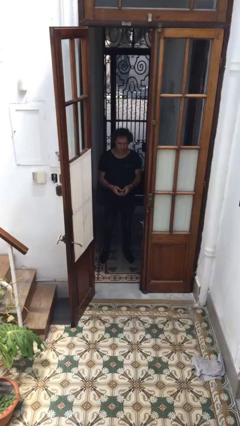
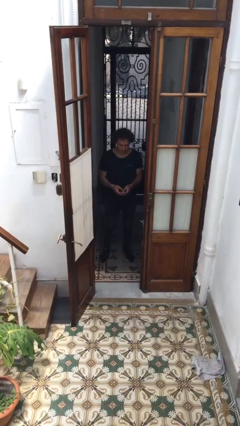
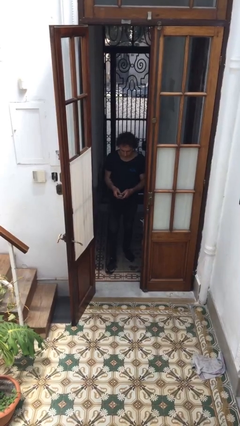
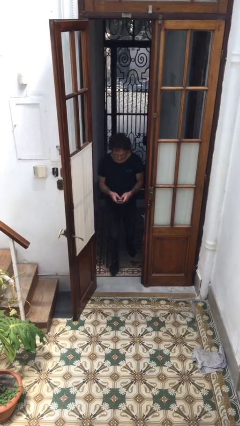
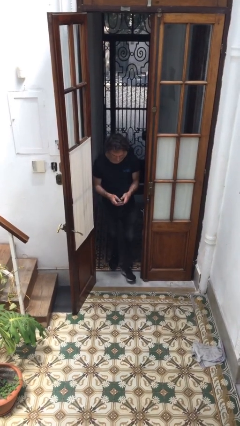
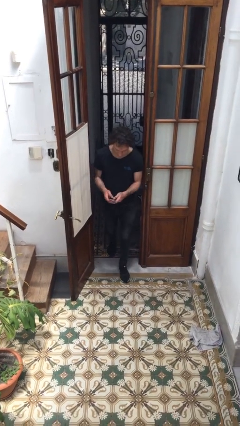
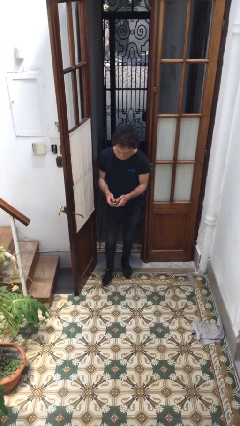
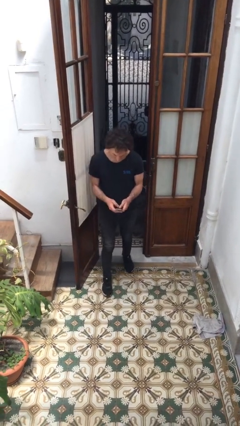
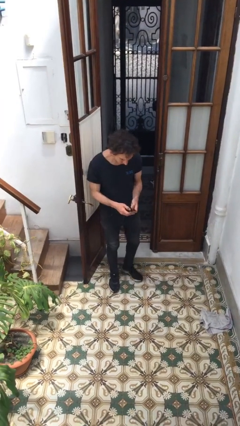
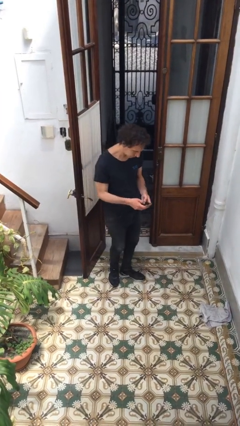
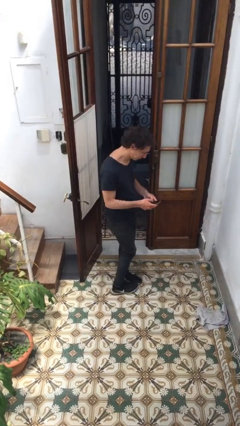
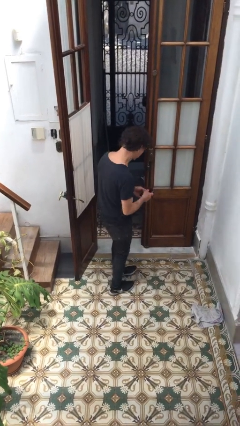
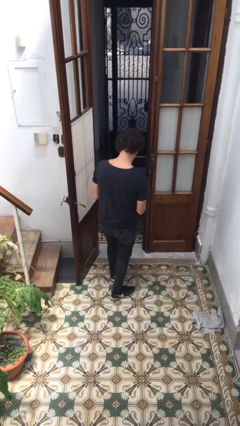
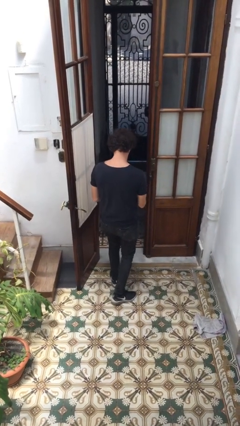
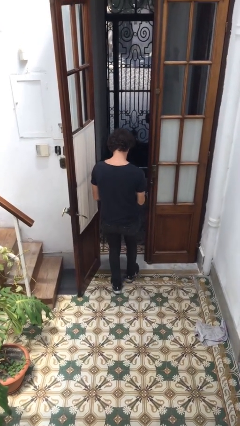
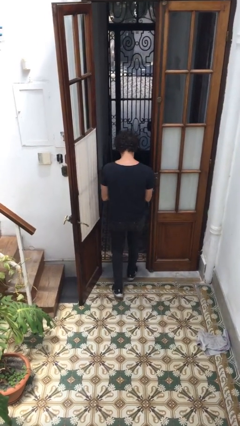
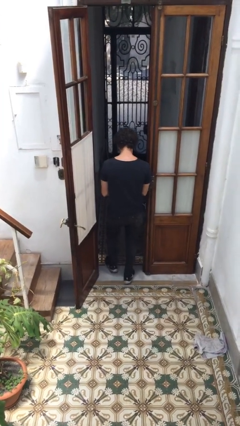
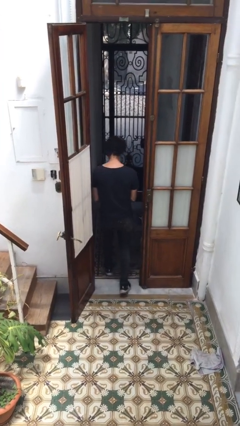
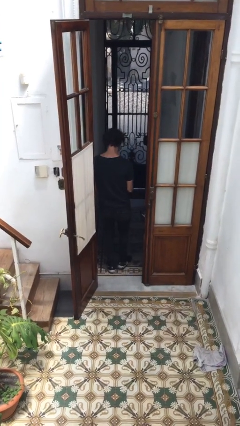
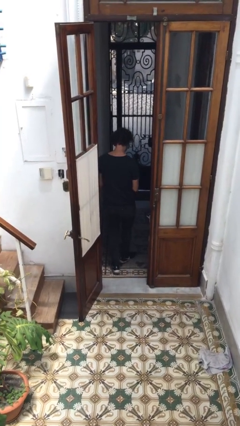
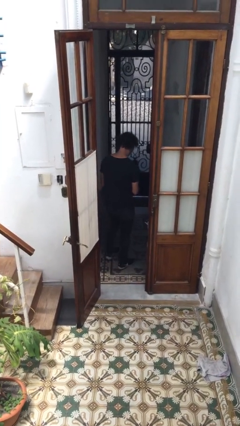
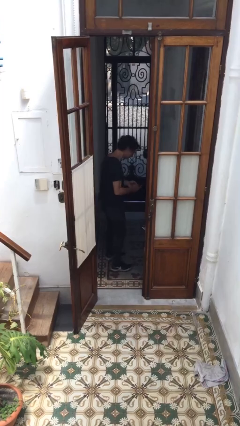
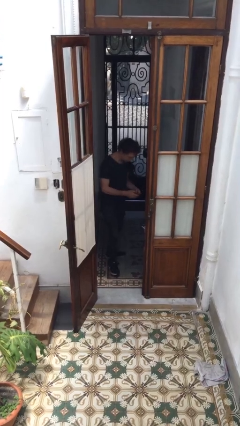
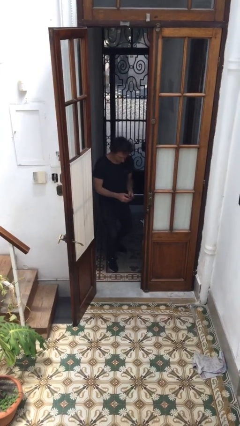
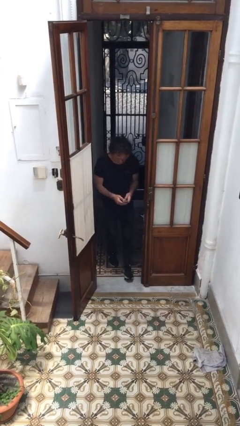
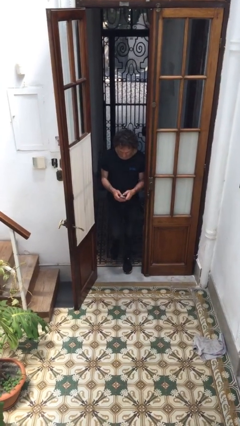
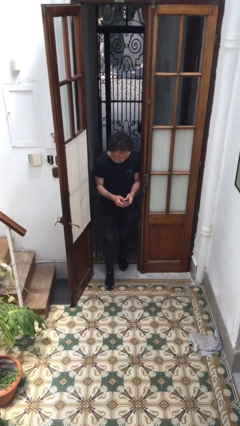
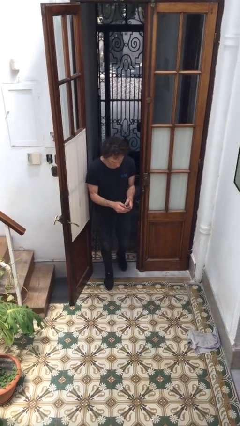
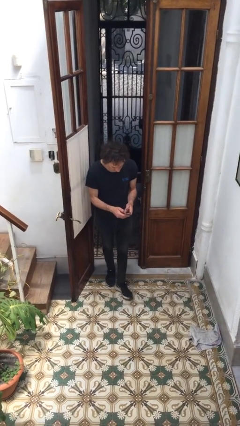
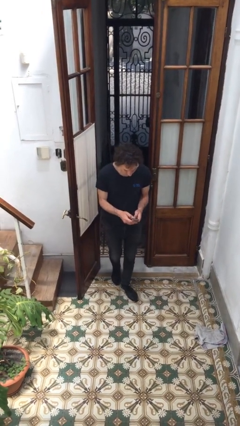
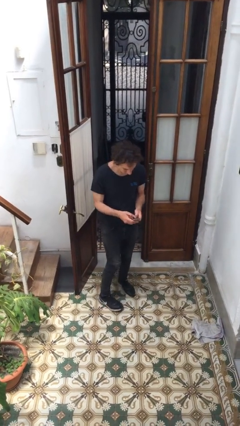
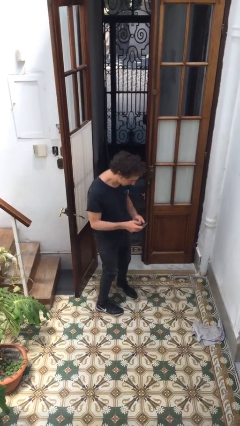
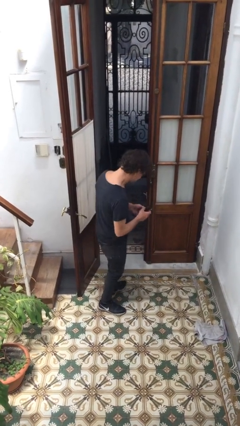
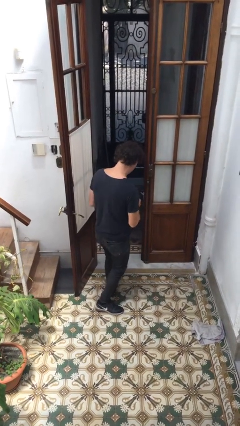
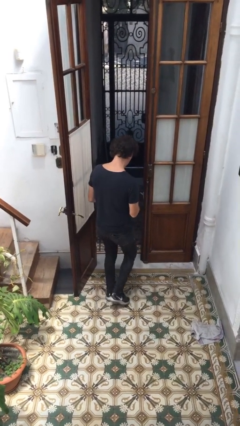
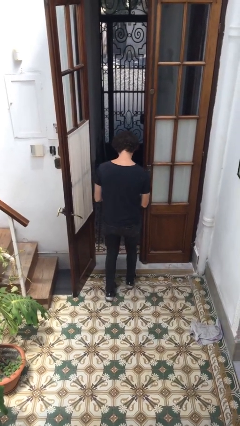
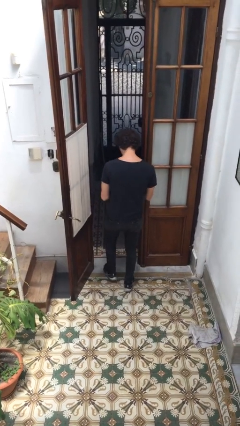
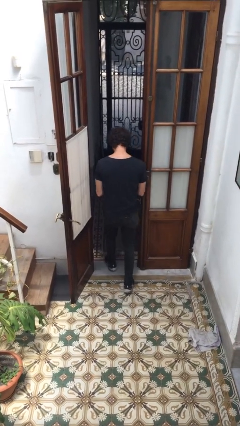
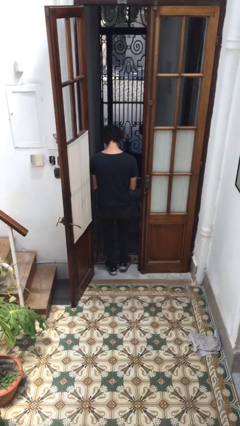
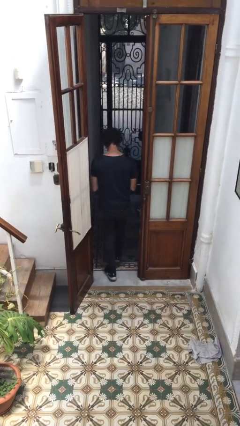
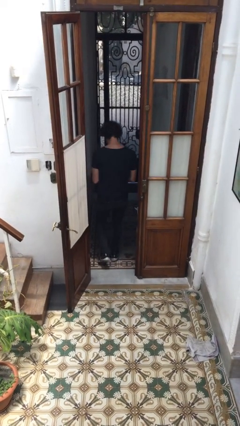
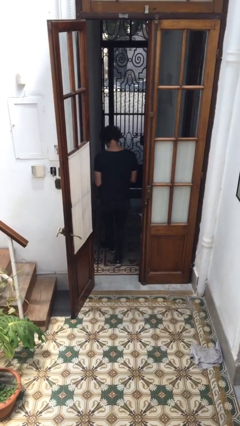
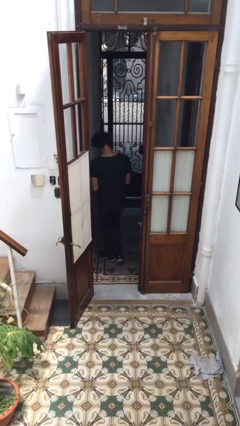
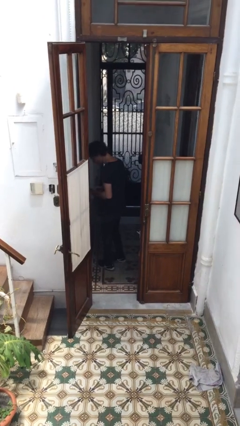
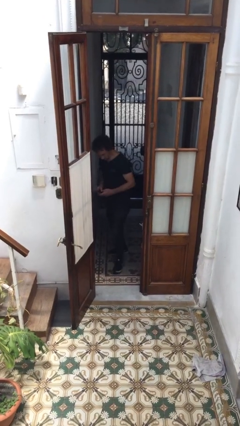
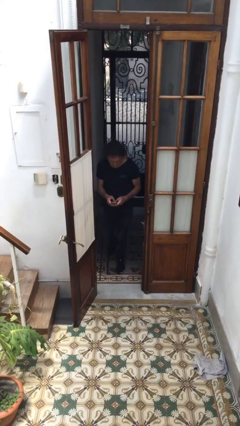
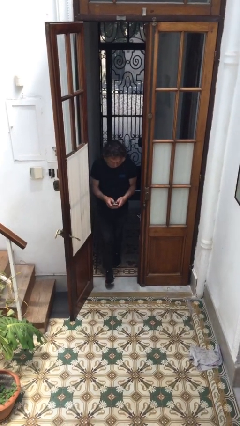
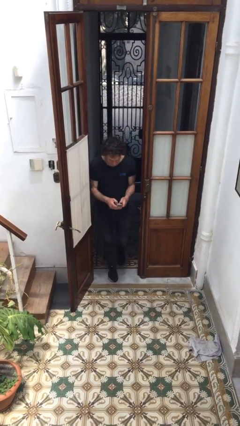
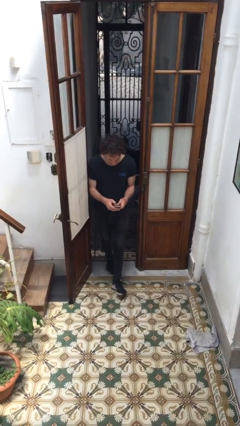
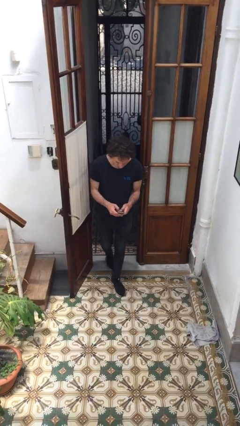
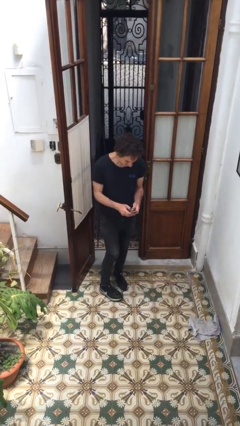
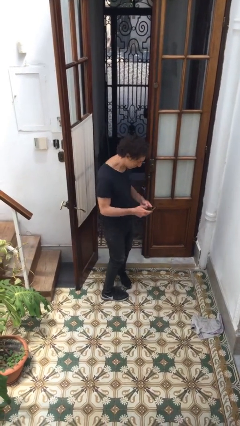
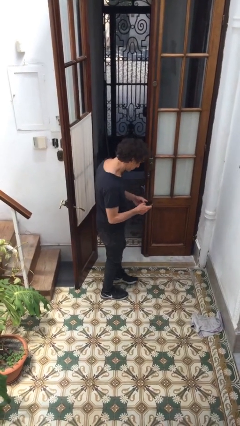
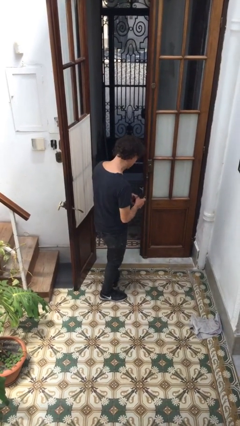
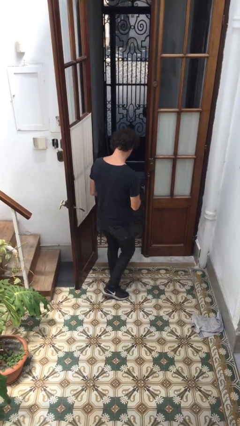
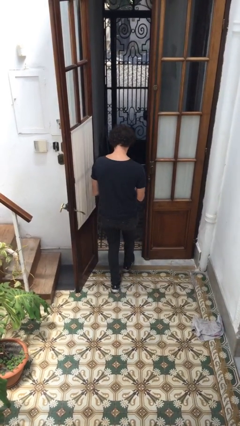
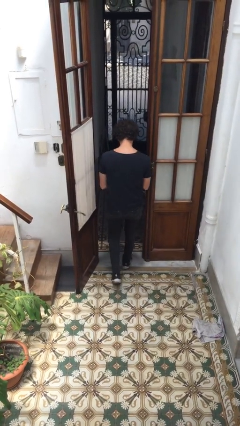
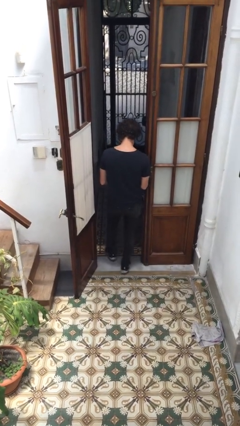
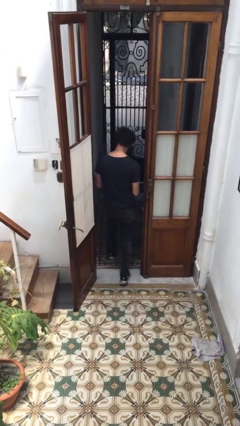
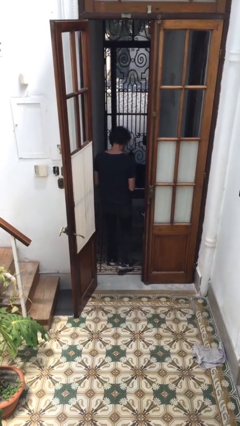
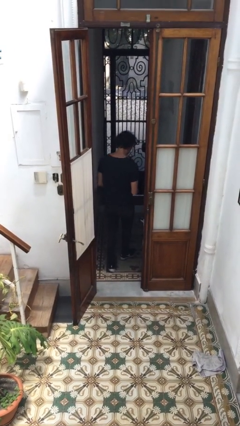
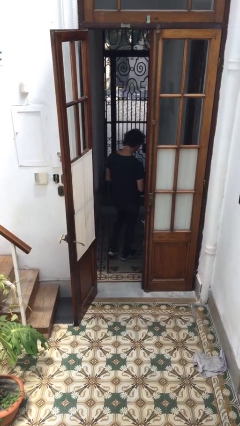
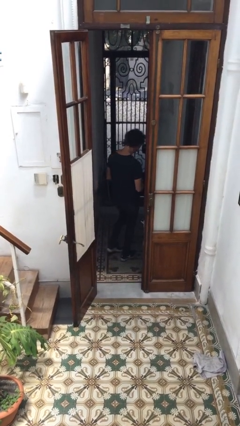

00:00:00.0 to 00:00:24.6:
person texts on phone

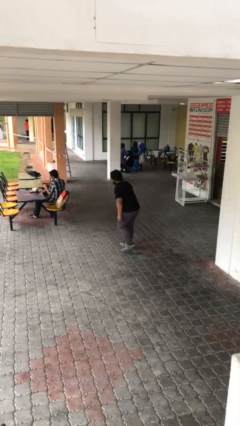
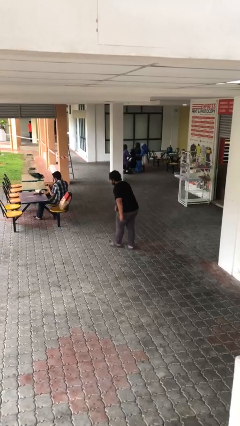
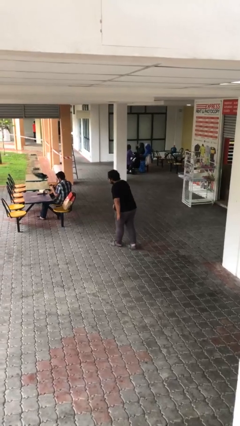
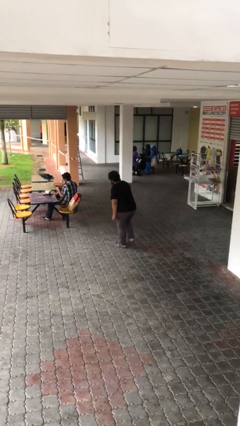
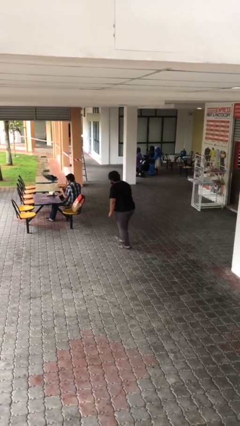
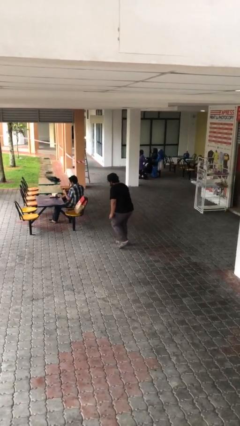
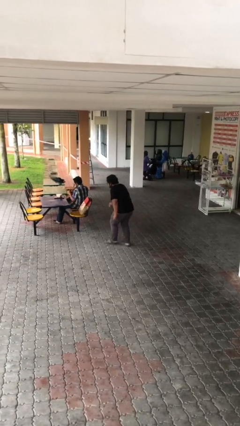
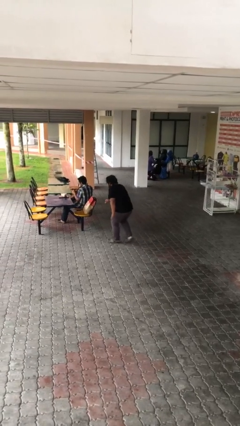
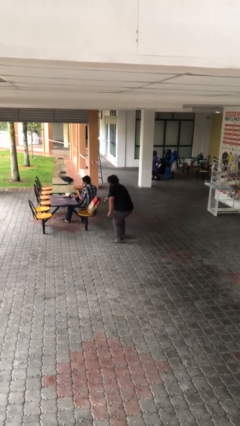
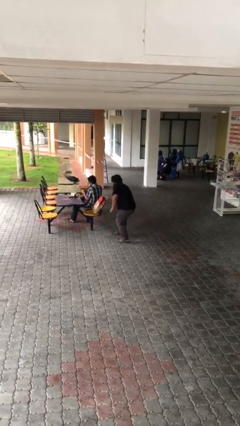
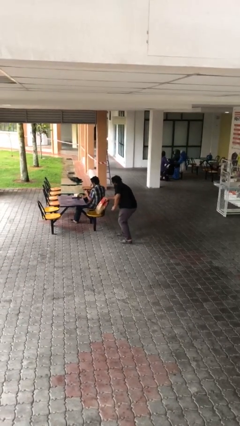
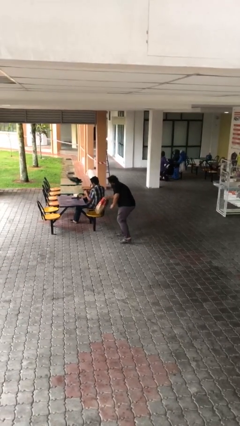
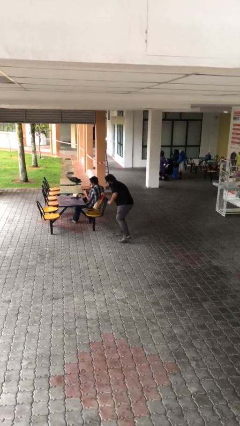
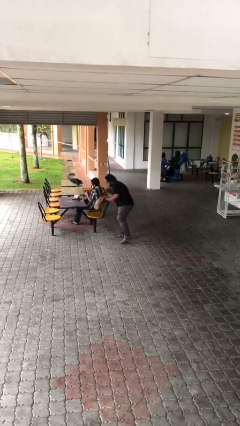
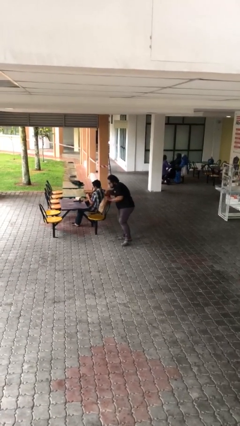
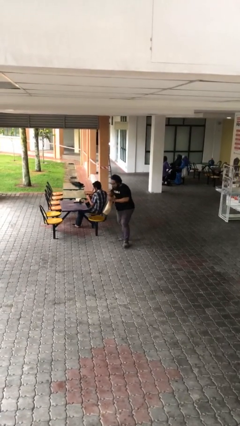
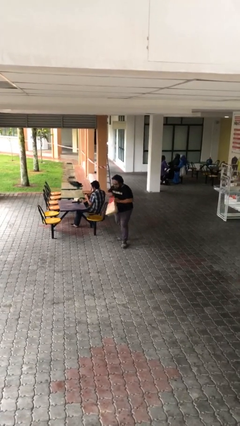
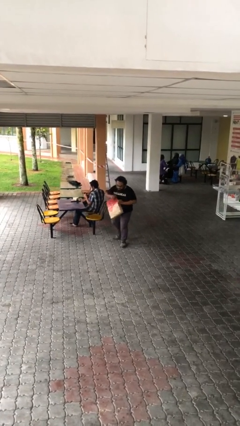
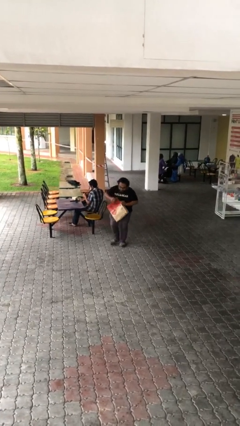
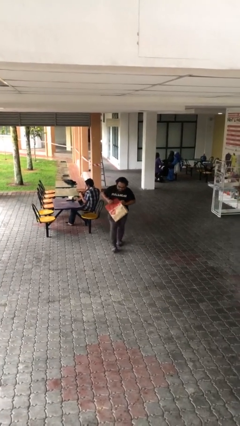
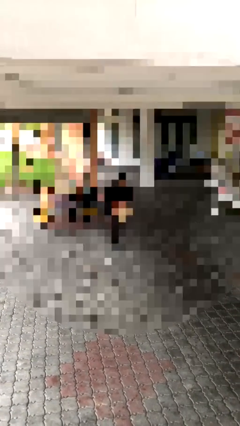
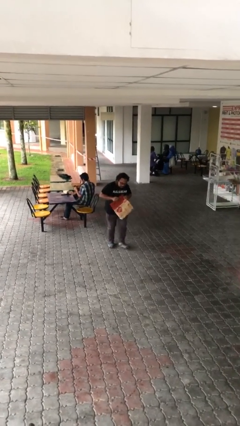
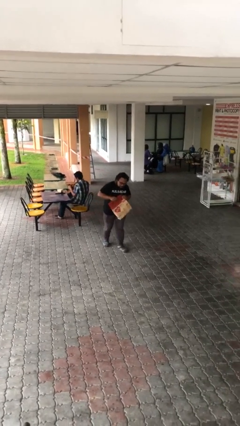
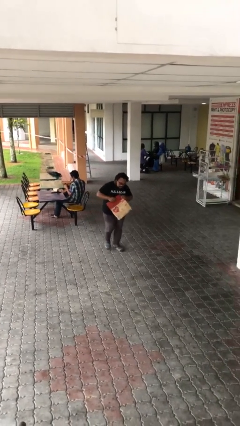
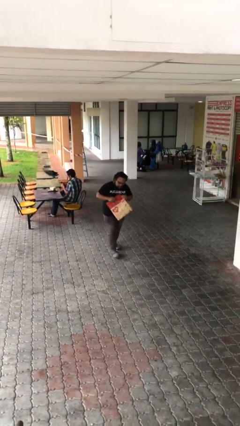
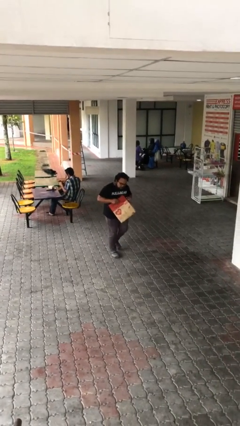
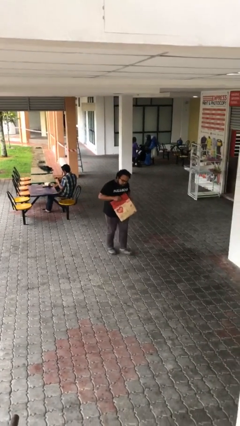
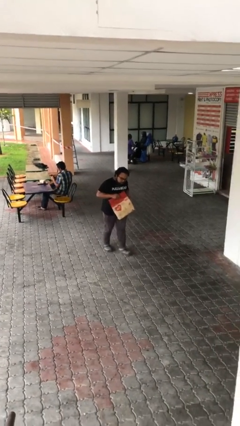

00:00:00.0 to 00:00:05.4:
person steals object from person

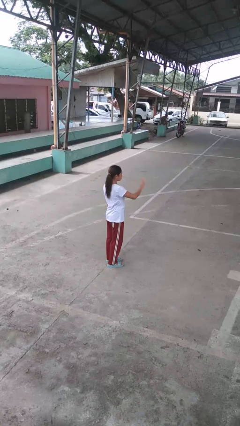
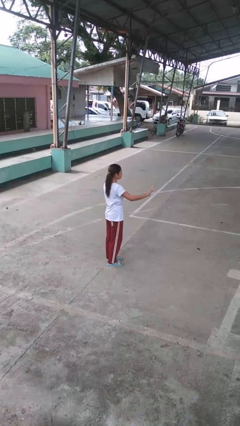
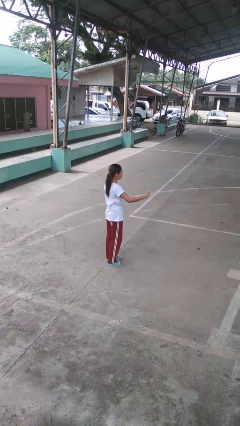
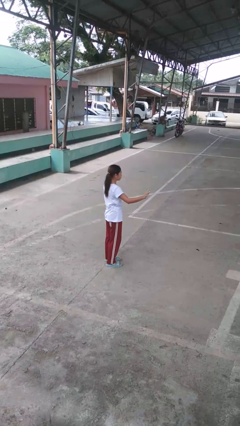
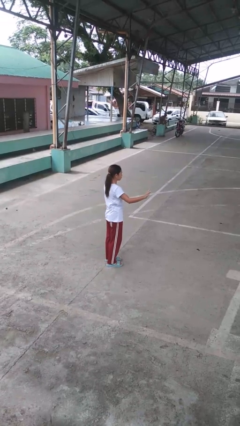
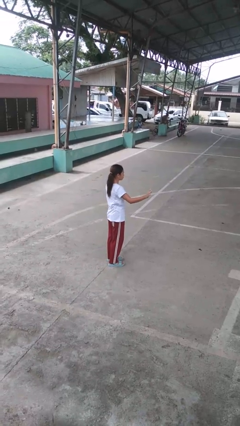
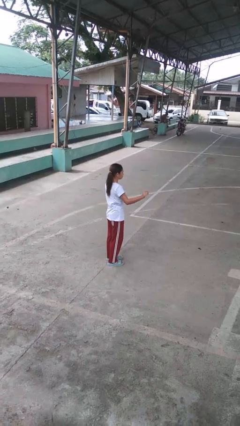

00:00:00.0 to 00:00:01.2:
person gestures swipe right
